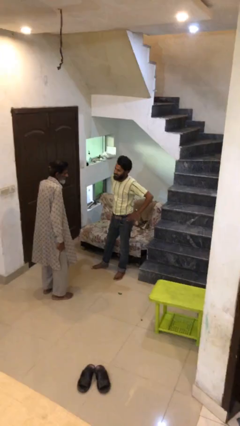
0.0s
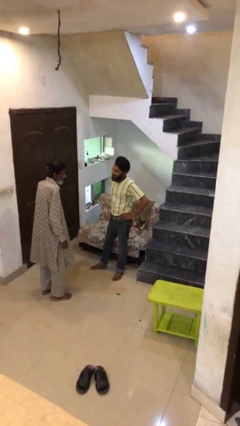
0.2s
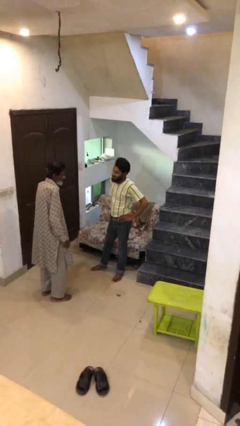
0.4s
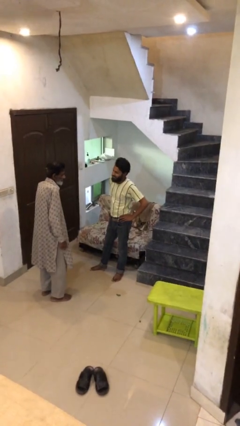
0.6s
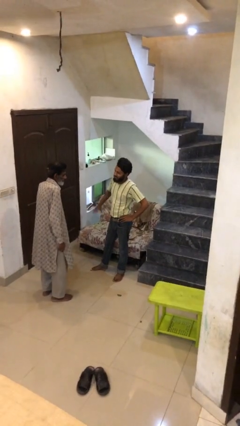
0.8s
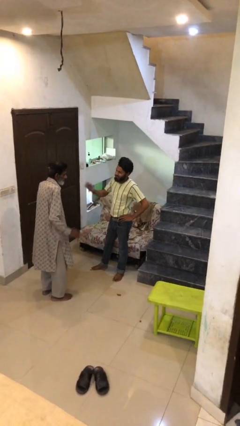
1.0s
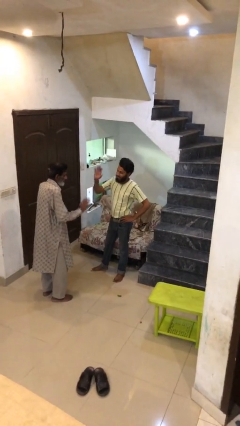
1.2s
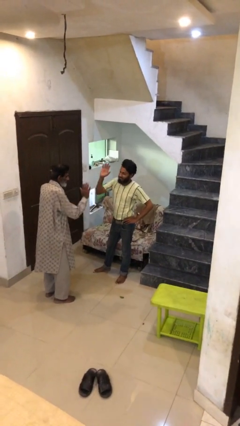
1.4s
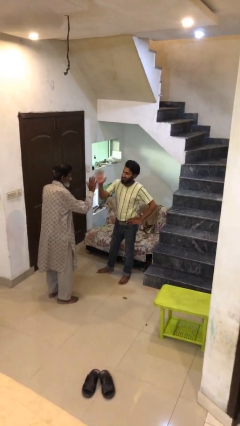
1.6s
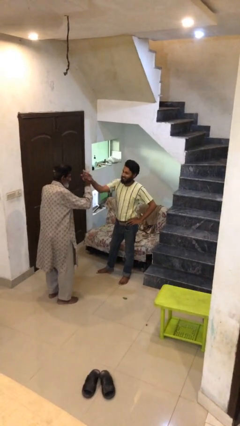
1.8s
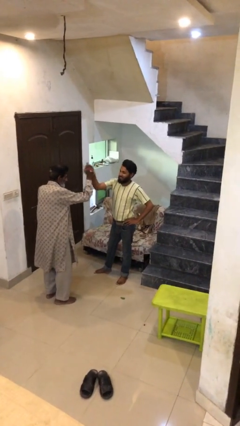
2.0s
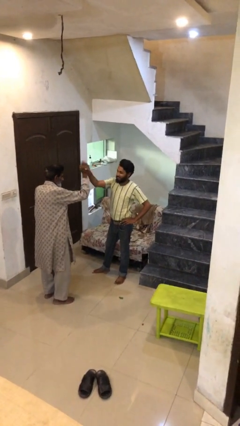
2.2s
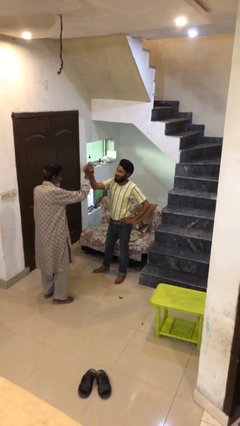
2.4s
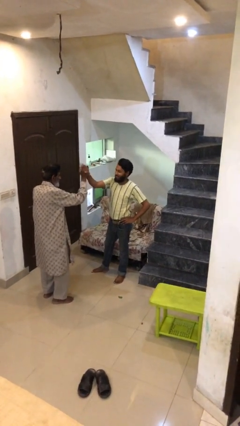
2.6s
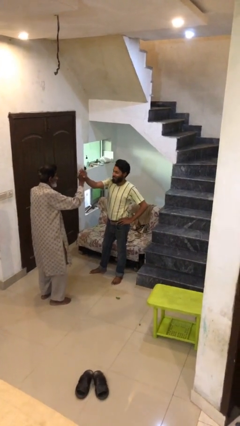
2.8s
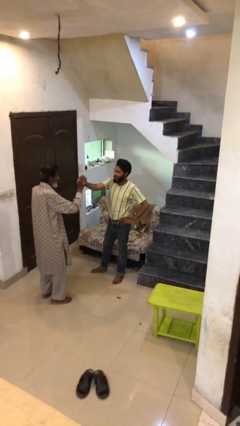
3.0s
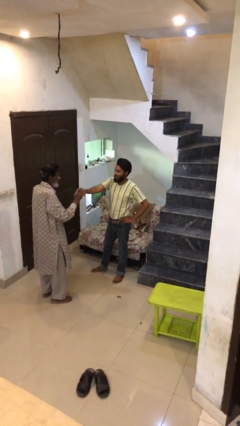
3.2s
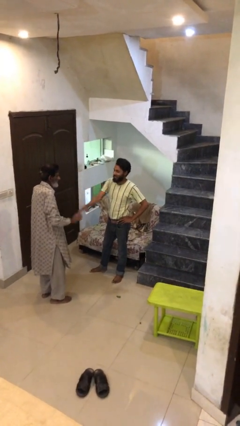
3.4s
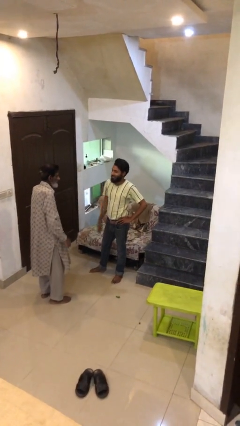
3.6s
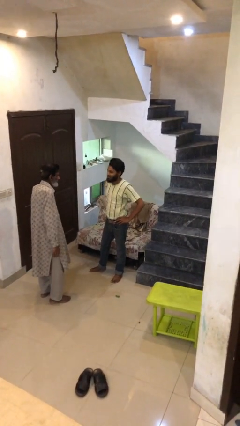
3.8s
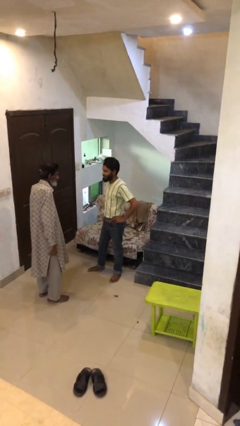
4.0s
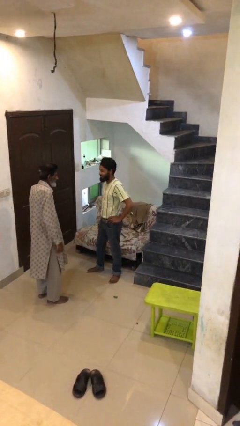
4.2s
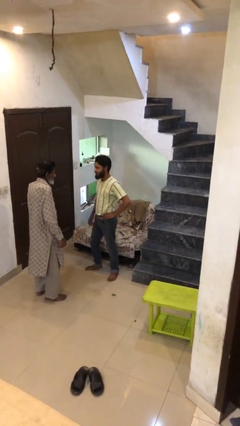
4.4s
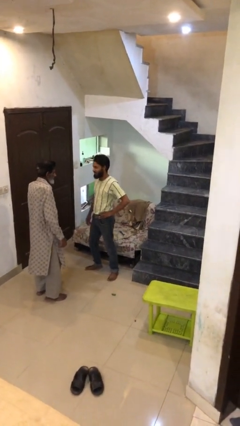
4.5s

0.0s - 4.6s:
person highfives hand

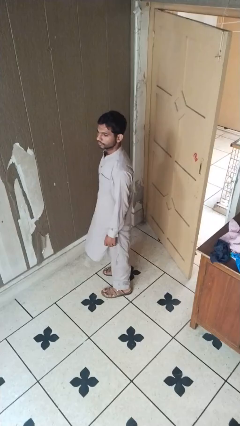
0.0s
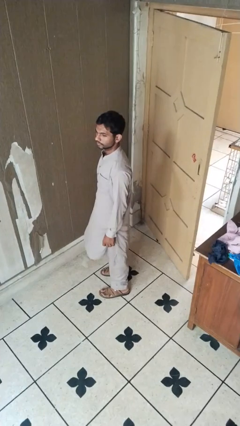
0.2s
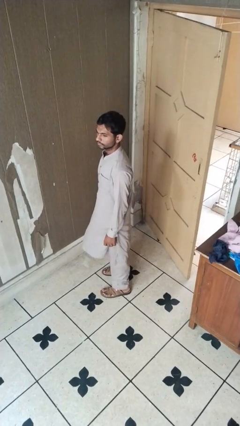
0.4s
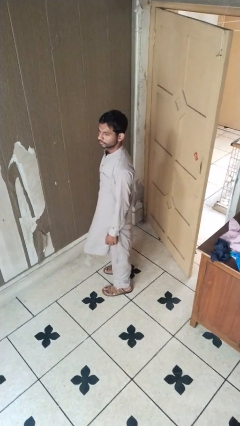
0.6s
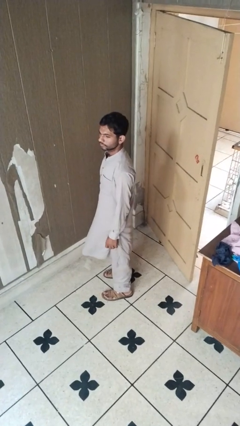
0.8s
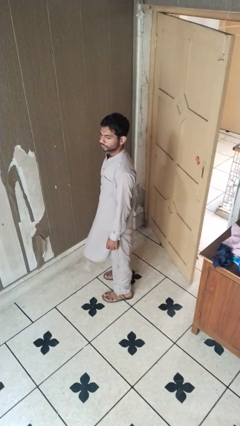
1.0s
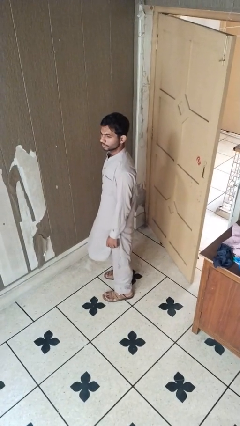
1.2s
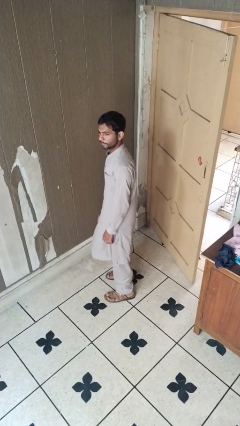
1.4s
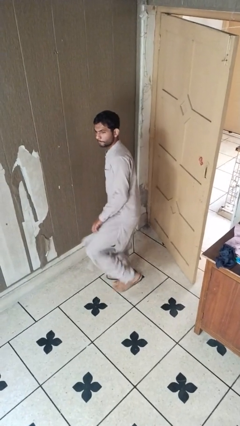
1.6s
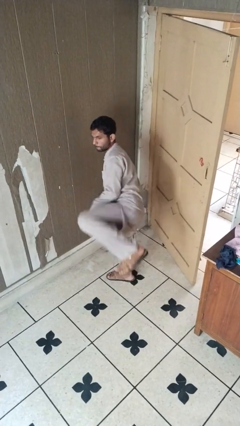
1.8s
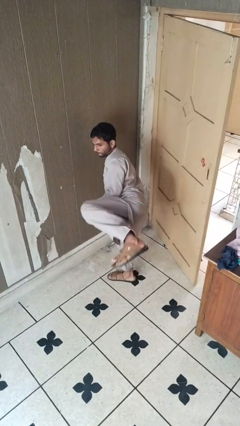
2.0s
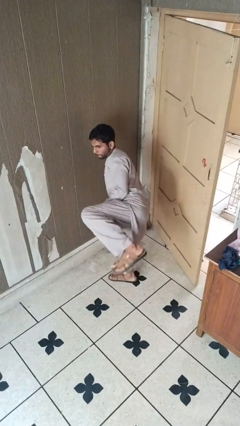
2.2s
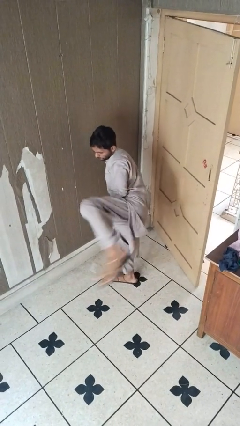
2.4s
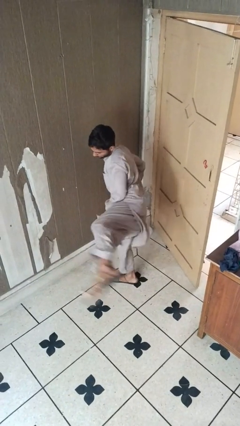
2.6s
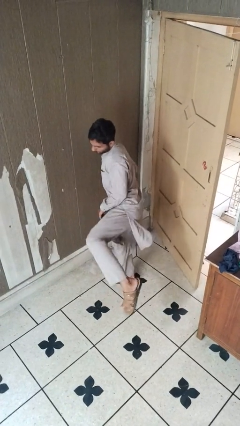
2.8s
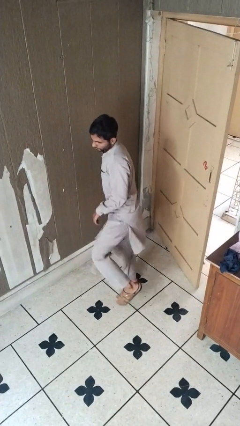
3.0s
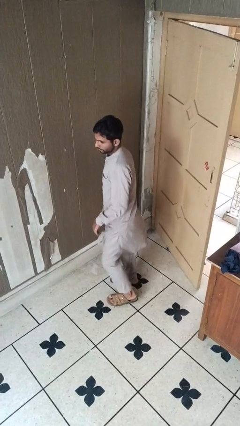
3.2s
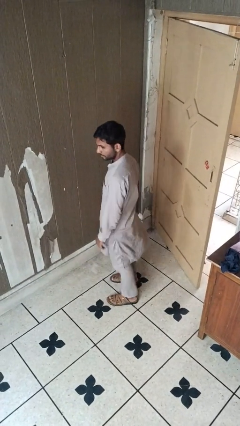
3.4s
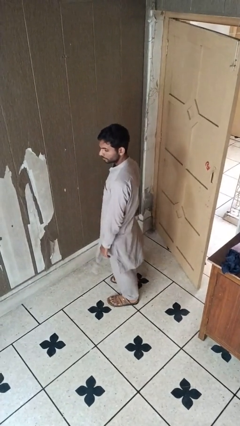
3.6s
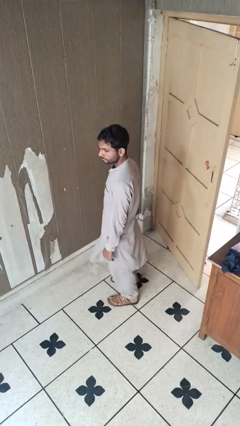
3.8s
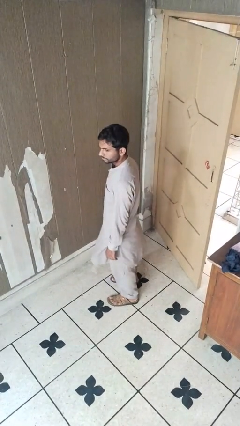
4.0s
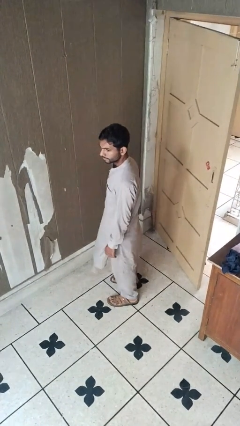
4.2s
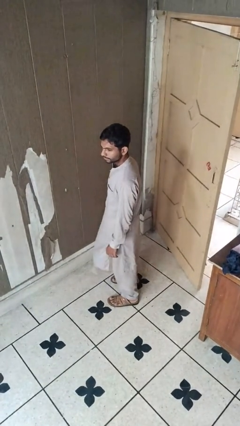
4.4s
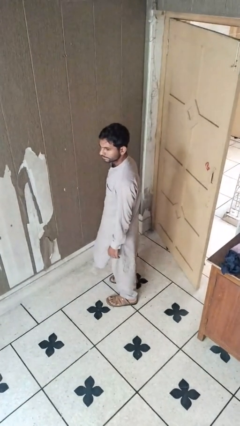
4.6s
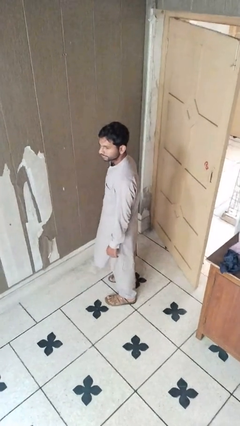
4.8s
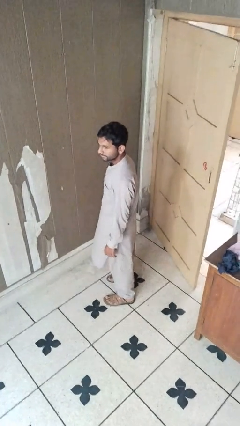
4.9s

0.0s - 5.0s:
person karate kicks

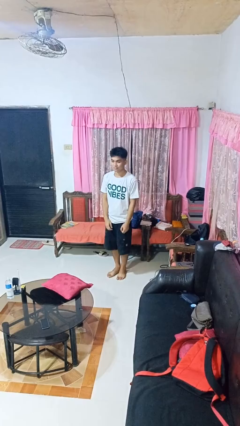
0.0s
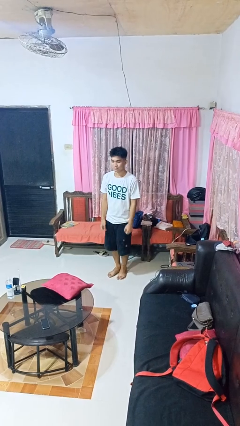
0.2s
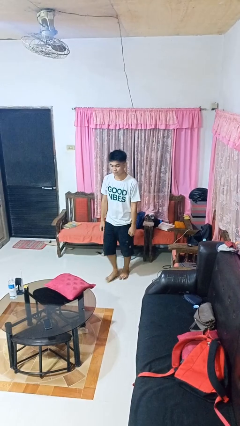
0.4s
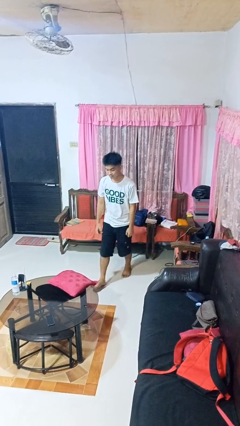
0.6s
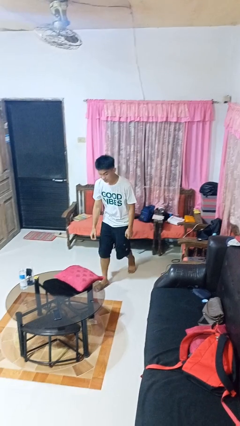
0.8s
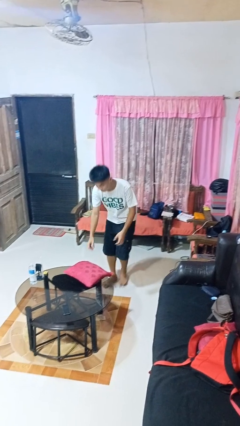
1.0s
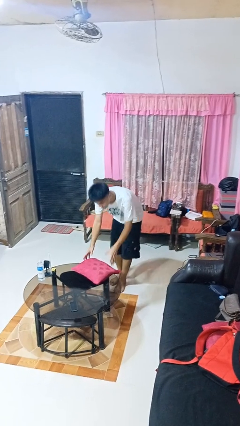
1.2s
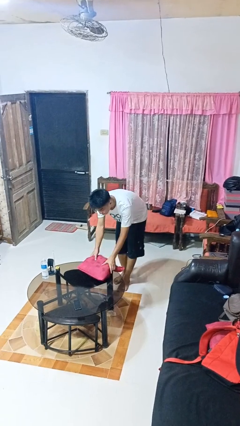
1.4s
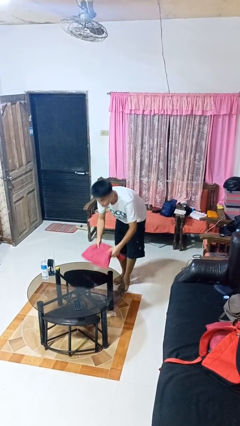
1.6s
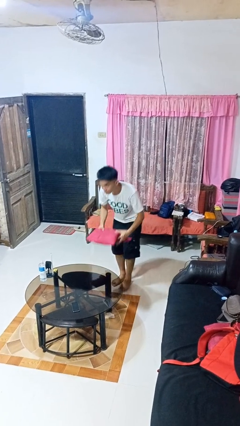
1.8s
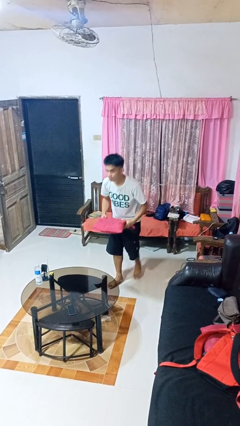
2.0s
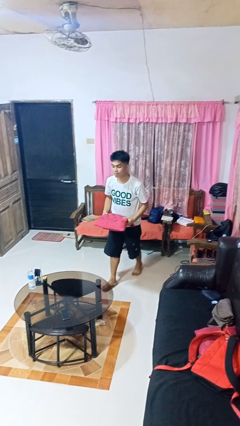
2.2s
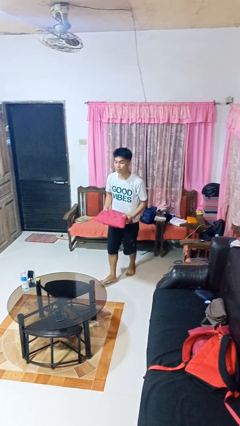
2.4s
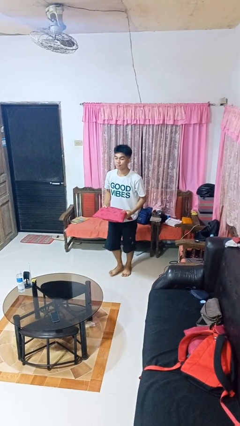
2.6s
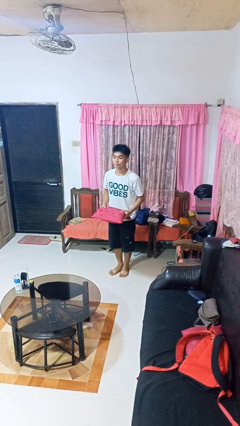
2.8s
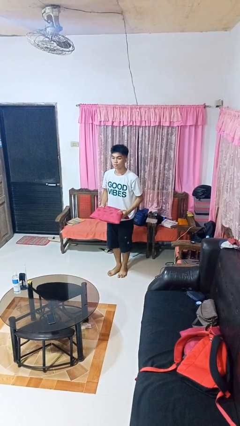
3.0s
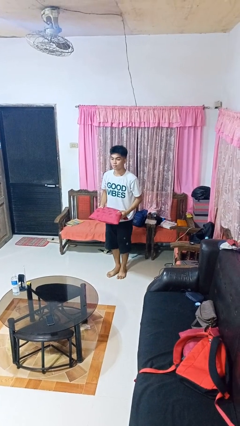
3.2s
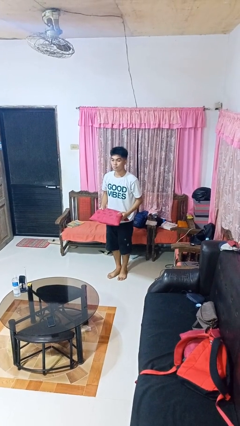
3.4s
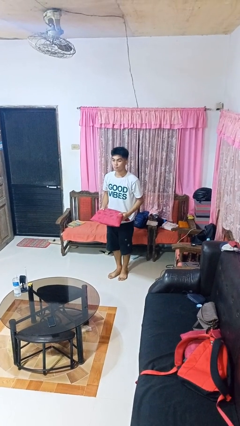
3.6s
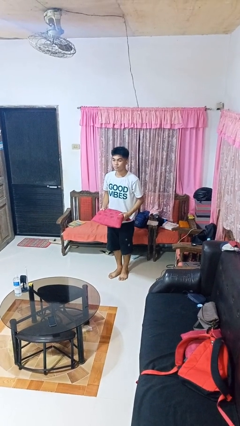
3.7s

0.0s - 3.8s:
person picks up object from table

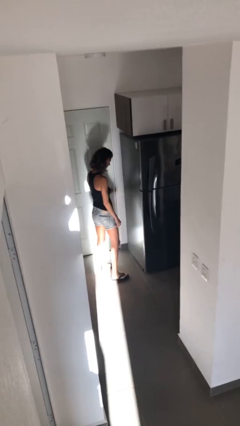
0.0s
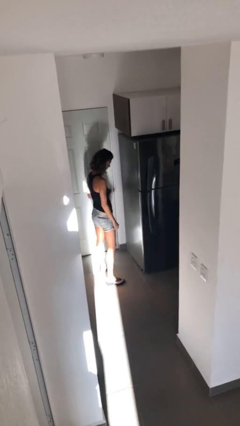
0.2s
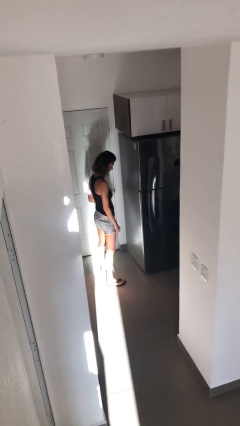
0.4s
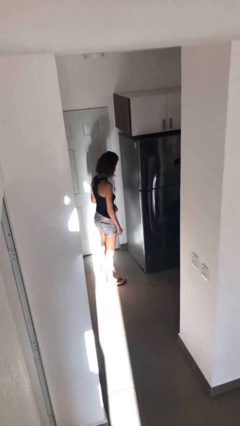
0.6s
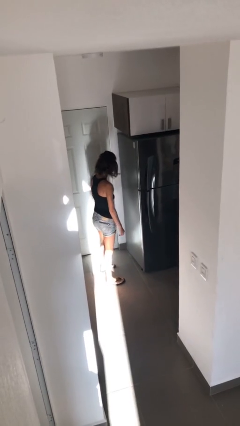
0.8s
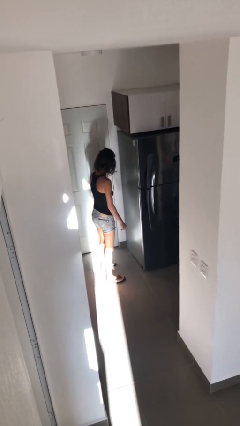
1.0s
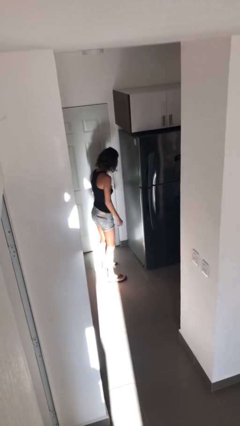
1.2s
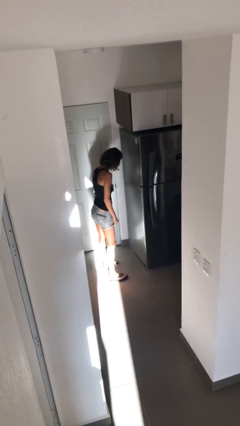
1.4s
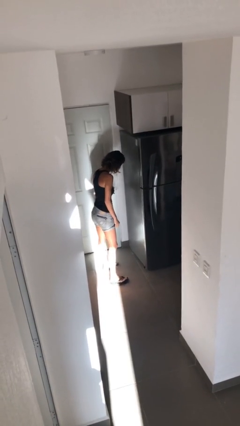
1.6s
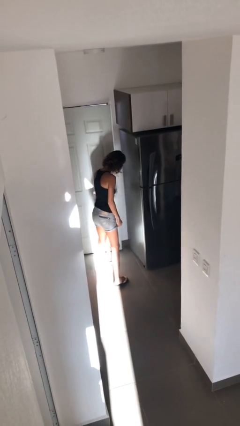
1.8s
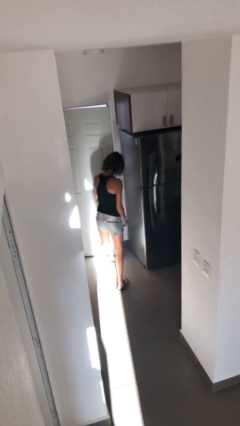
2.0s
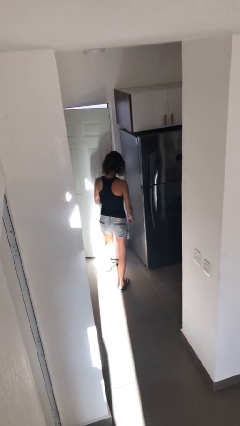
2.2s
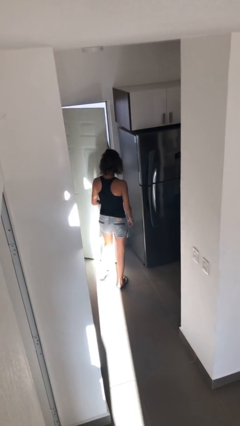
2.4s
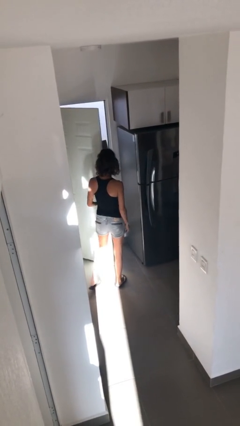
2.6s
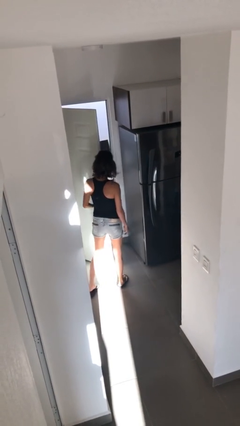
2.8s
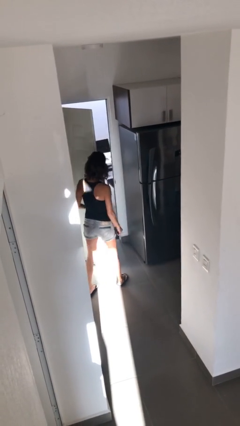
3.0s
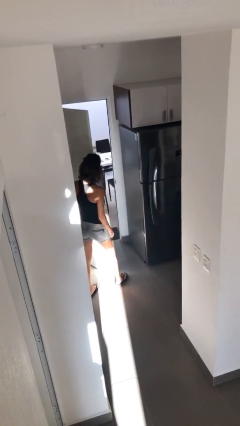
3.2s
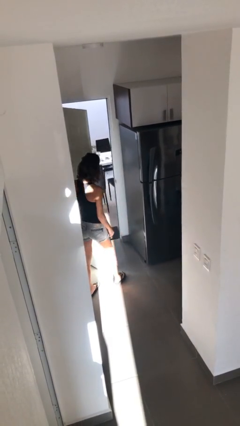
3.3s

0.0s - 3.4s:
person opens facility door

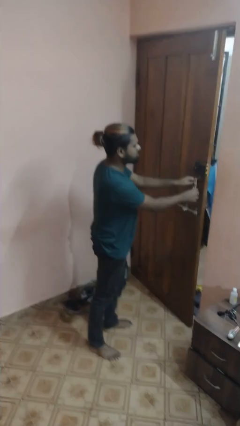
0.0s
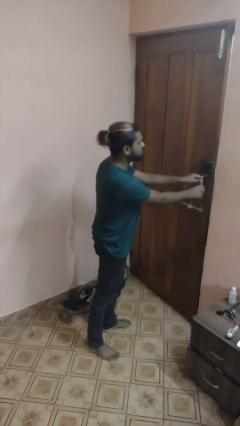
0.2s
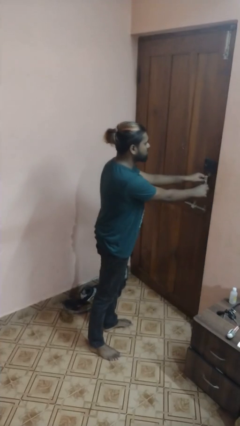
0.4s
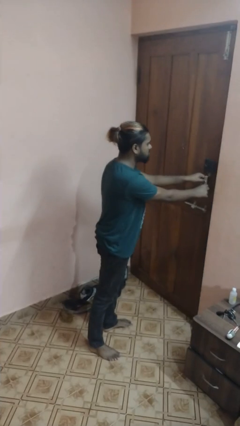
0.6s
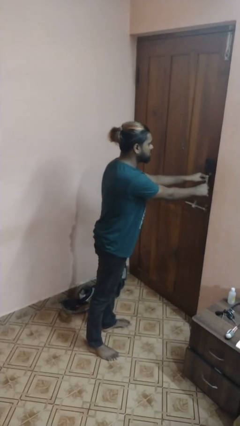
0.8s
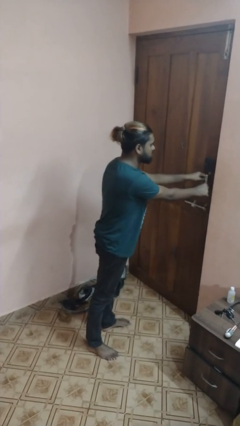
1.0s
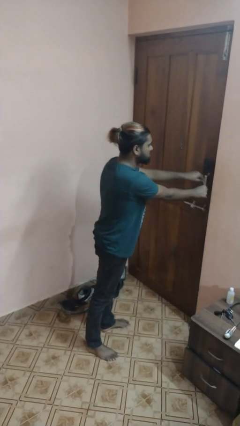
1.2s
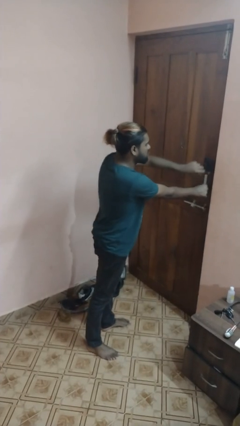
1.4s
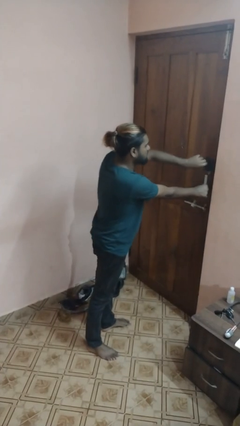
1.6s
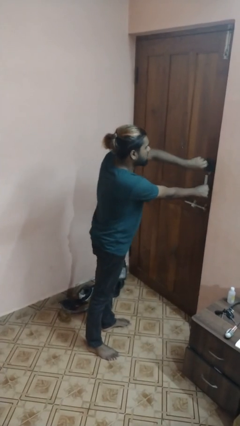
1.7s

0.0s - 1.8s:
person closes facility door
